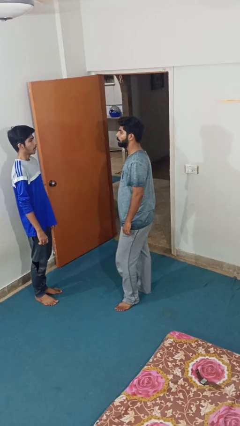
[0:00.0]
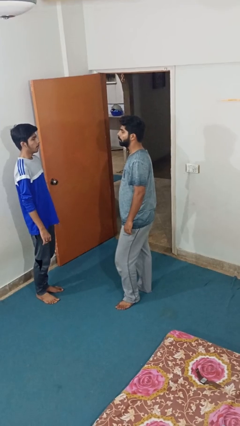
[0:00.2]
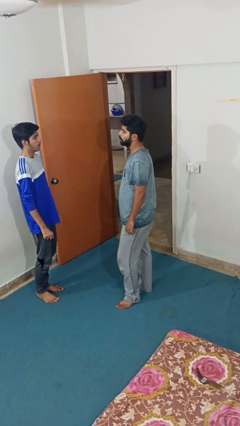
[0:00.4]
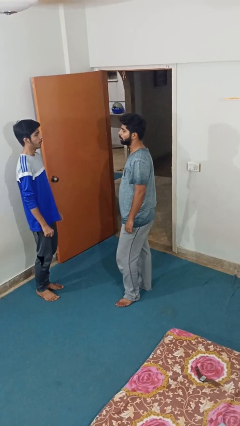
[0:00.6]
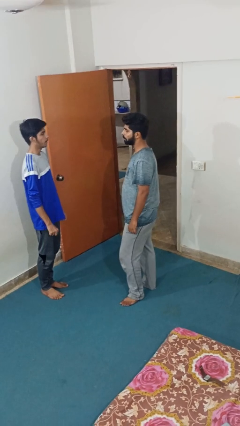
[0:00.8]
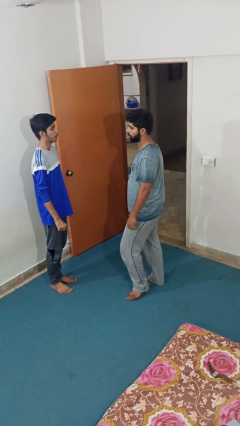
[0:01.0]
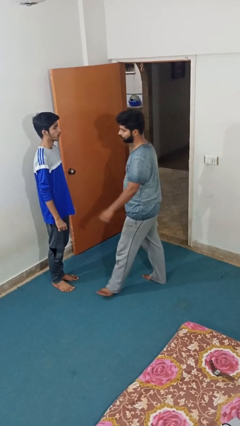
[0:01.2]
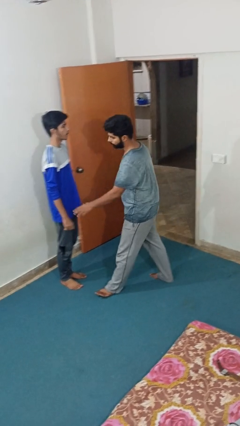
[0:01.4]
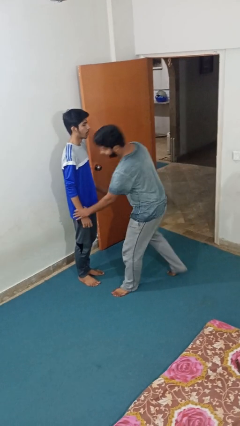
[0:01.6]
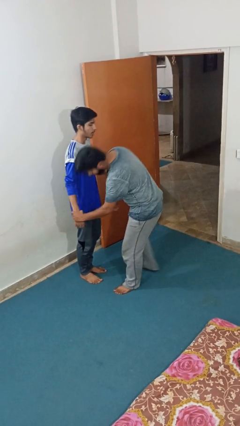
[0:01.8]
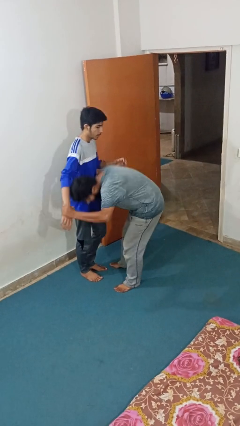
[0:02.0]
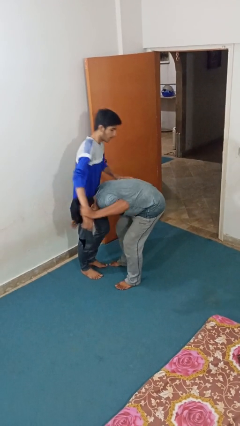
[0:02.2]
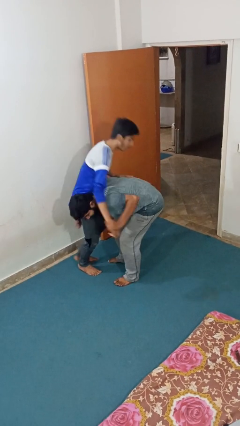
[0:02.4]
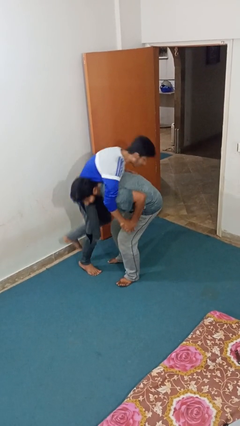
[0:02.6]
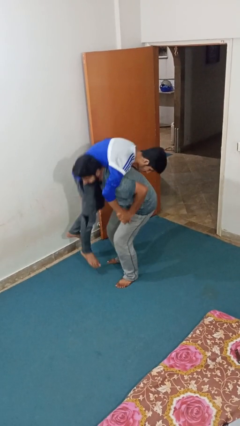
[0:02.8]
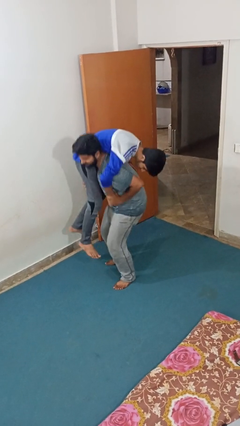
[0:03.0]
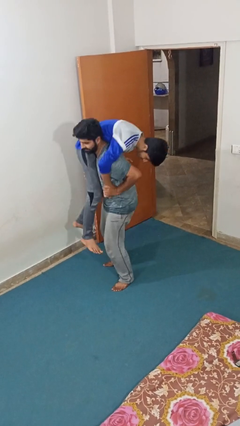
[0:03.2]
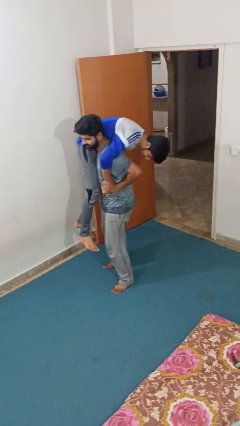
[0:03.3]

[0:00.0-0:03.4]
person carries person over shoulder

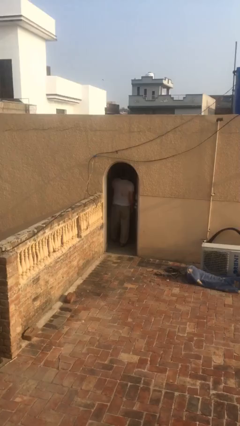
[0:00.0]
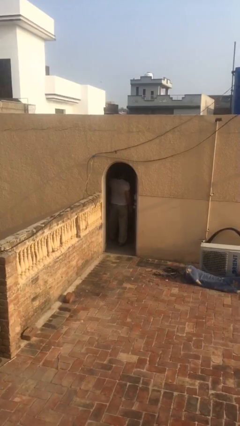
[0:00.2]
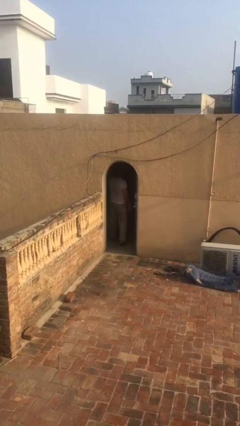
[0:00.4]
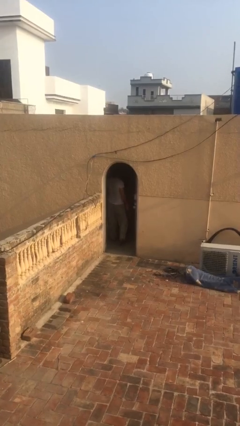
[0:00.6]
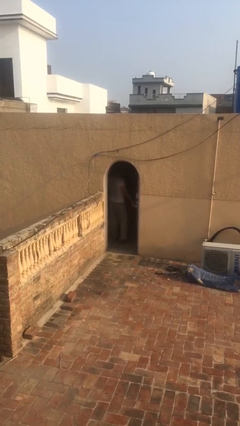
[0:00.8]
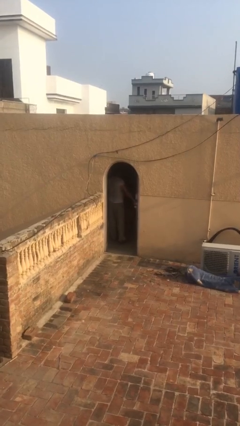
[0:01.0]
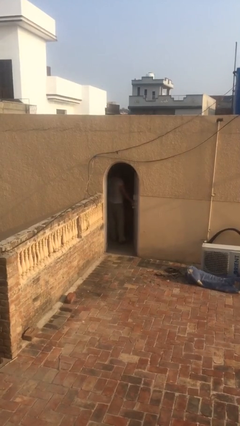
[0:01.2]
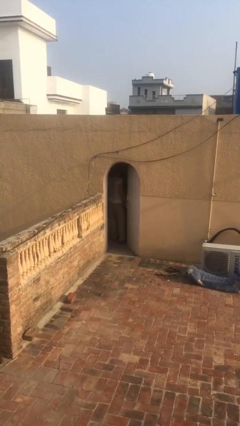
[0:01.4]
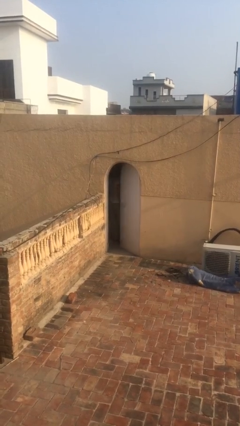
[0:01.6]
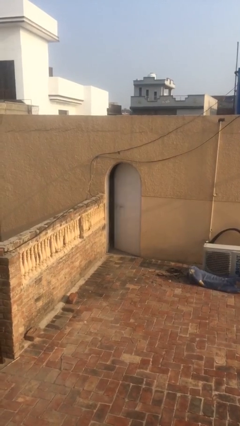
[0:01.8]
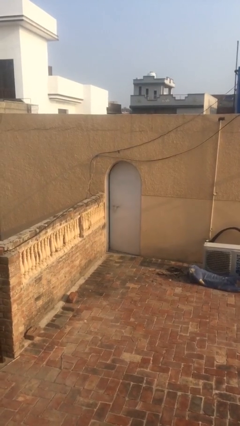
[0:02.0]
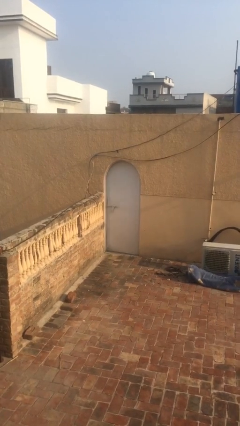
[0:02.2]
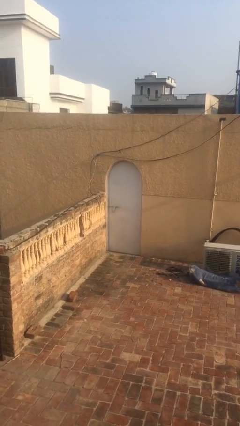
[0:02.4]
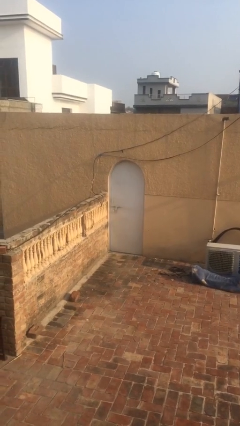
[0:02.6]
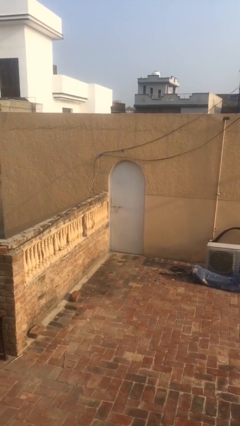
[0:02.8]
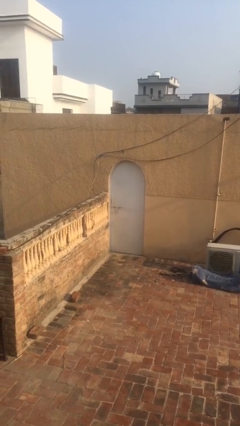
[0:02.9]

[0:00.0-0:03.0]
person closes facility door

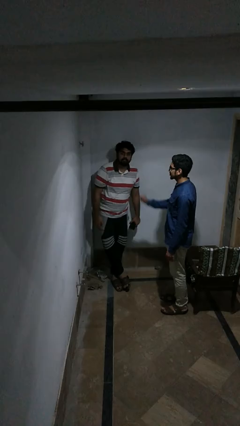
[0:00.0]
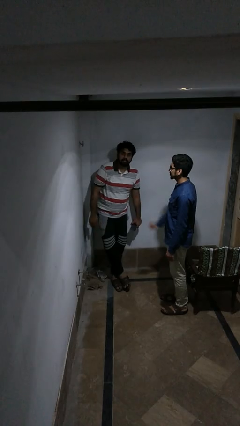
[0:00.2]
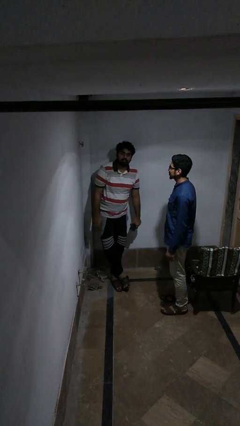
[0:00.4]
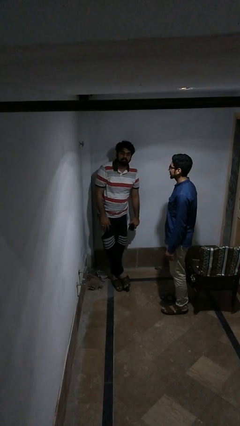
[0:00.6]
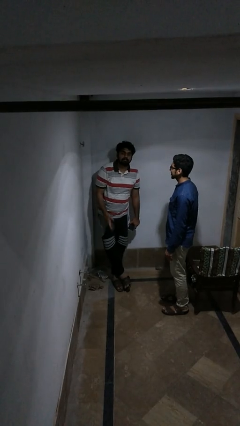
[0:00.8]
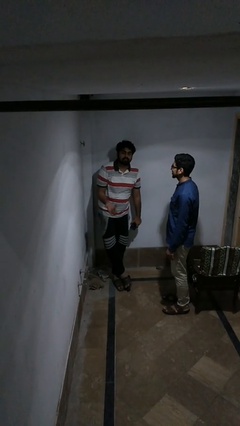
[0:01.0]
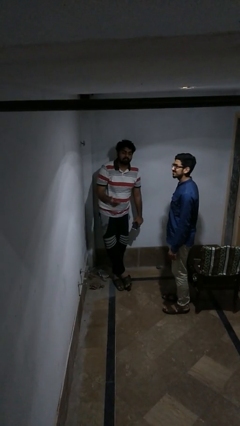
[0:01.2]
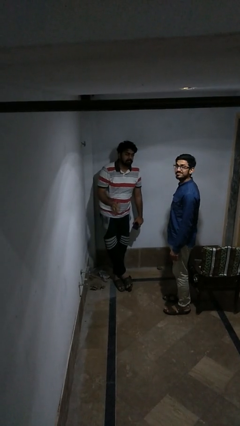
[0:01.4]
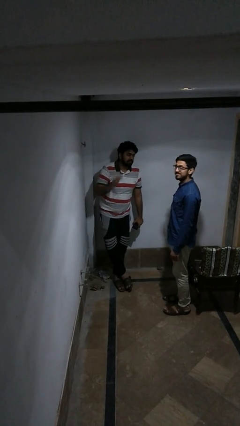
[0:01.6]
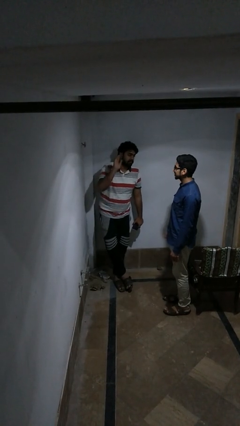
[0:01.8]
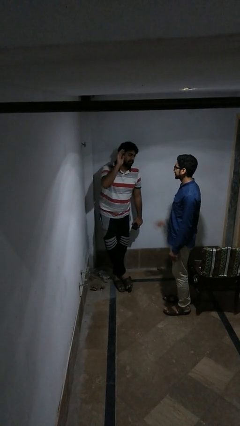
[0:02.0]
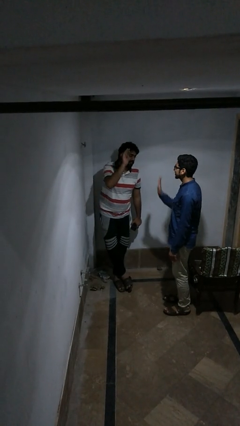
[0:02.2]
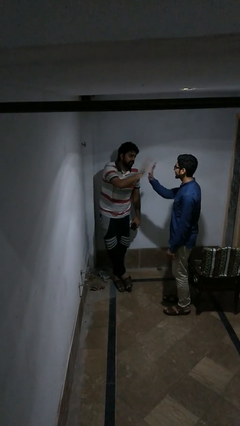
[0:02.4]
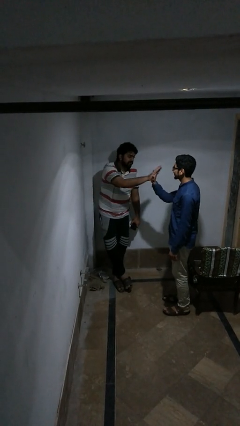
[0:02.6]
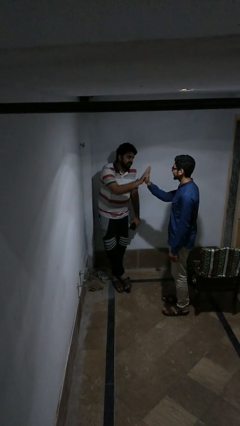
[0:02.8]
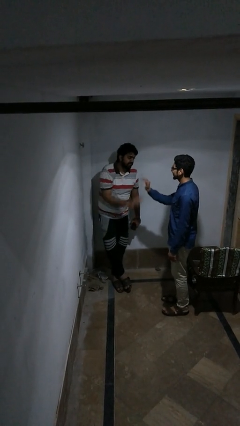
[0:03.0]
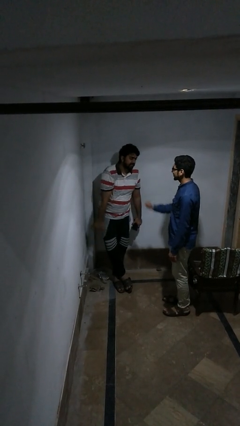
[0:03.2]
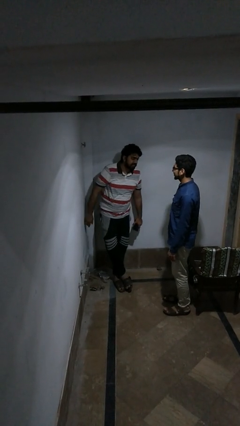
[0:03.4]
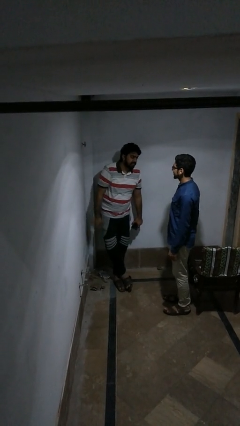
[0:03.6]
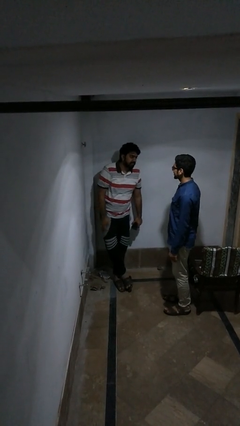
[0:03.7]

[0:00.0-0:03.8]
person highfives hand

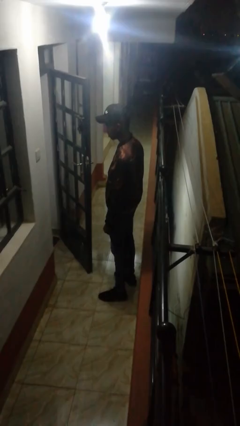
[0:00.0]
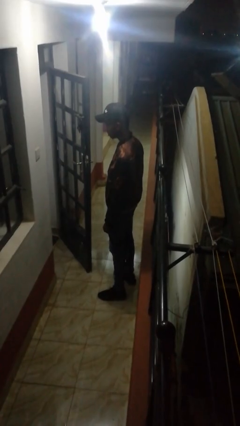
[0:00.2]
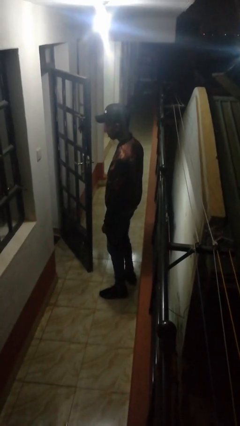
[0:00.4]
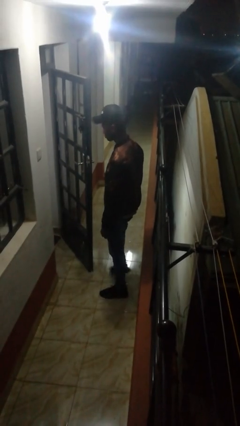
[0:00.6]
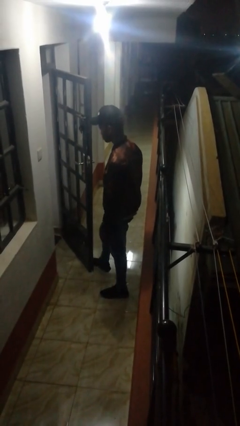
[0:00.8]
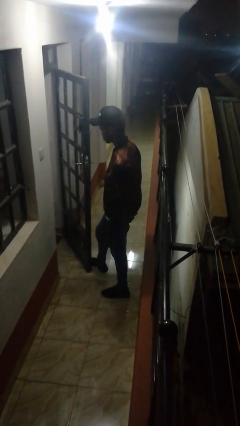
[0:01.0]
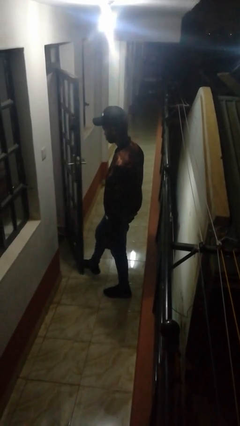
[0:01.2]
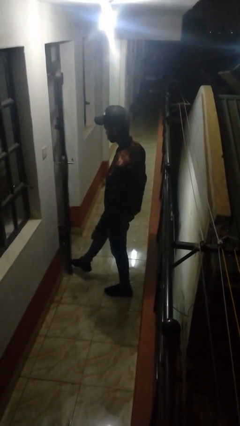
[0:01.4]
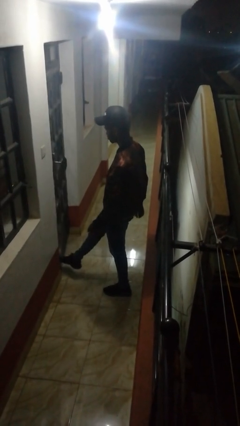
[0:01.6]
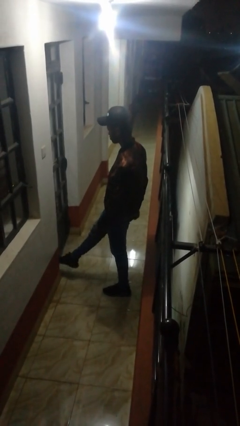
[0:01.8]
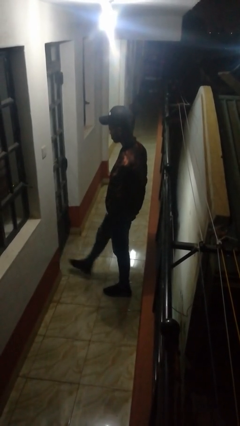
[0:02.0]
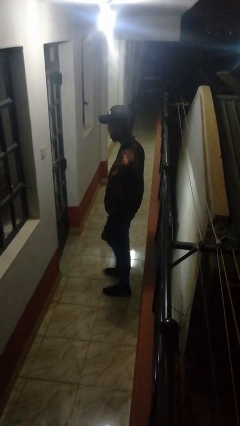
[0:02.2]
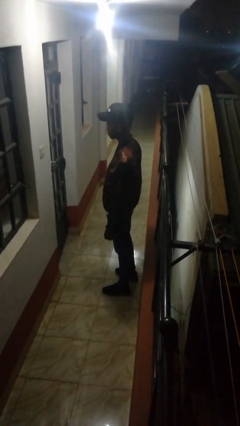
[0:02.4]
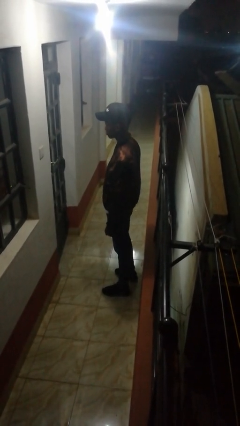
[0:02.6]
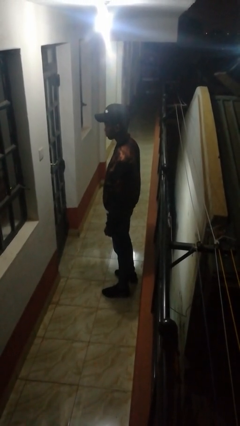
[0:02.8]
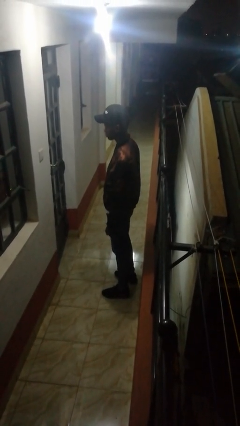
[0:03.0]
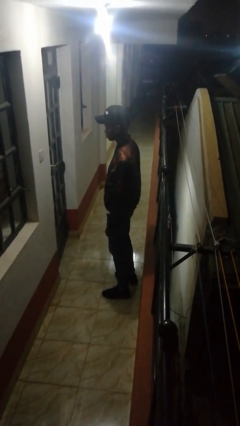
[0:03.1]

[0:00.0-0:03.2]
person closes door with foot

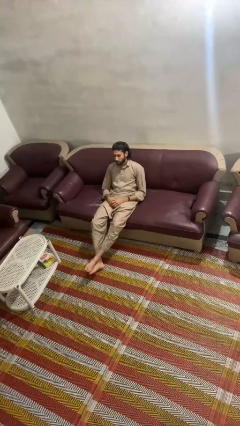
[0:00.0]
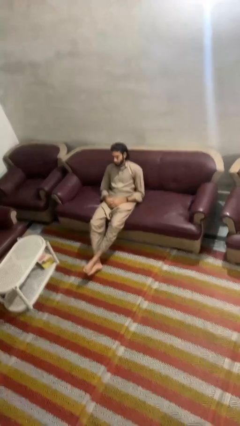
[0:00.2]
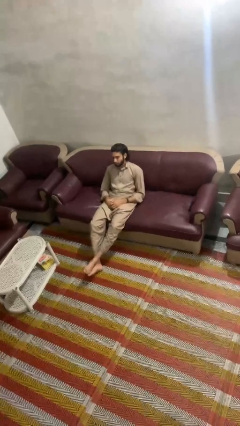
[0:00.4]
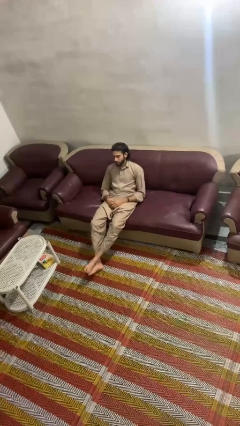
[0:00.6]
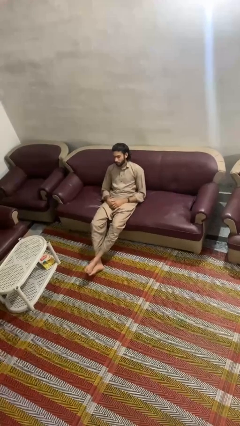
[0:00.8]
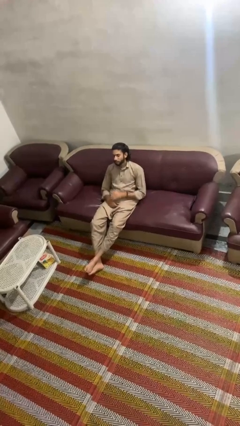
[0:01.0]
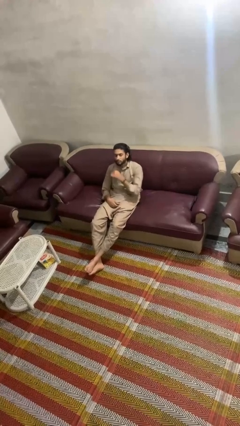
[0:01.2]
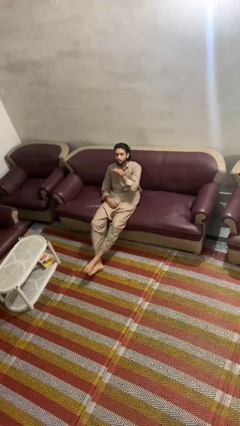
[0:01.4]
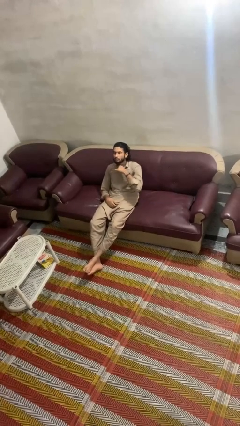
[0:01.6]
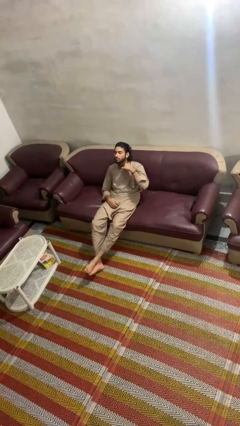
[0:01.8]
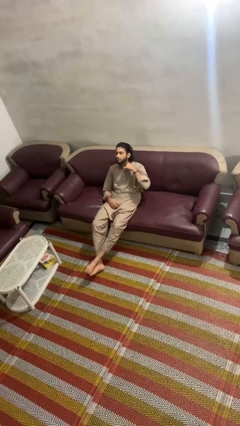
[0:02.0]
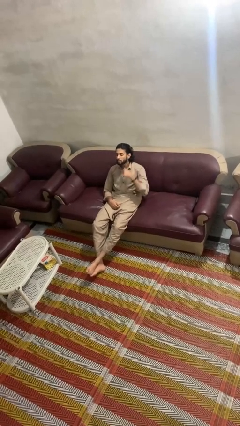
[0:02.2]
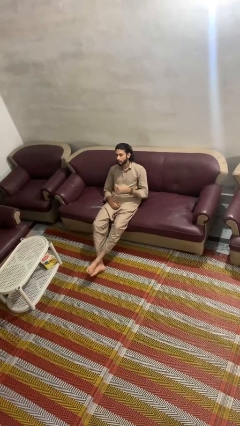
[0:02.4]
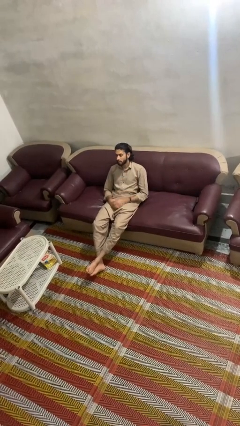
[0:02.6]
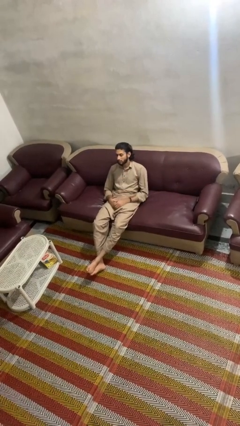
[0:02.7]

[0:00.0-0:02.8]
person gestures cut

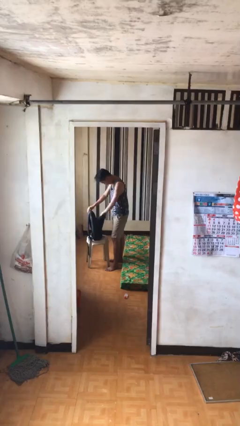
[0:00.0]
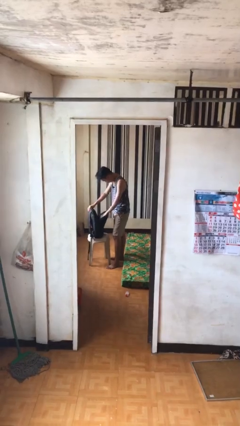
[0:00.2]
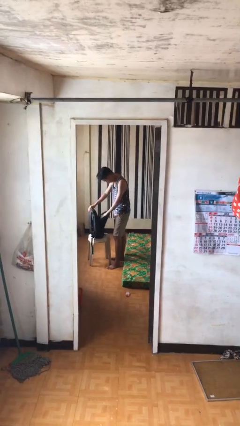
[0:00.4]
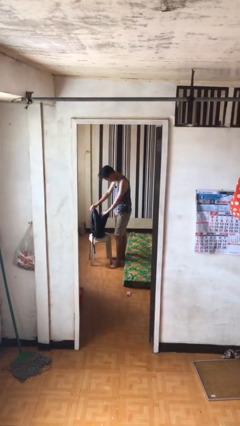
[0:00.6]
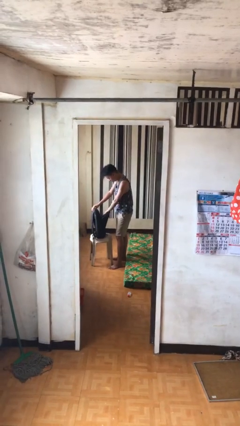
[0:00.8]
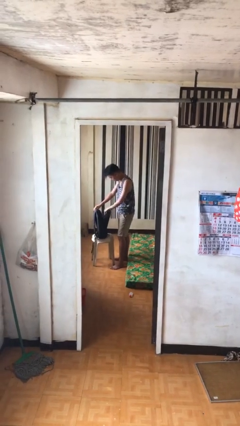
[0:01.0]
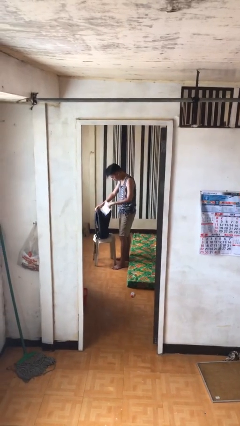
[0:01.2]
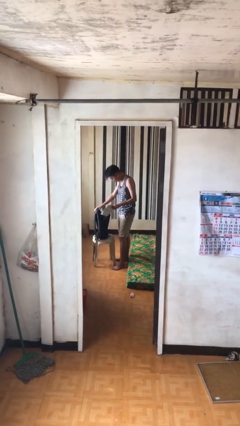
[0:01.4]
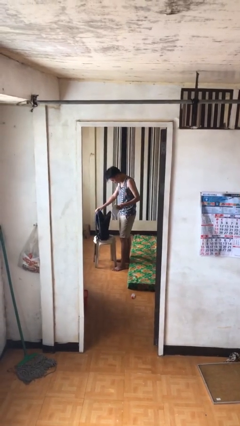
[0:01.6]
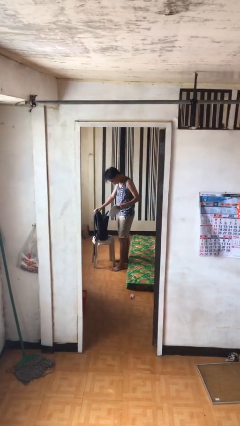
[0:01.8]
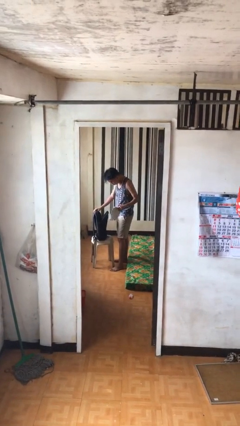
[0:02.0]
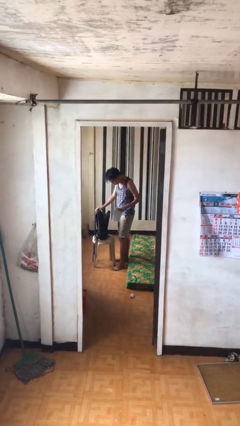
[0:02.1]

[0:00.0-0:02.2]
person takes object from backpack
